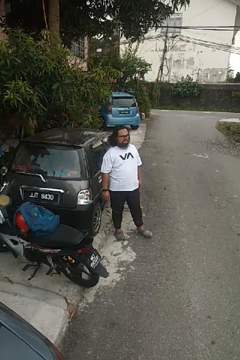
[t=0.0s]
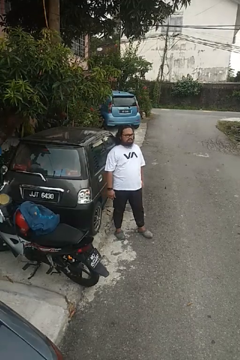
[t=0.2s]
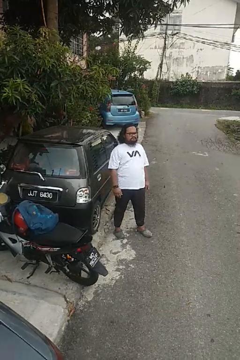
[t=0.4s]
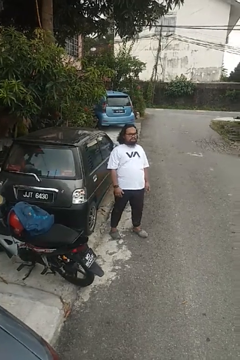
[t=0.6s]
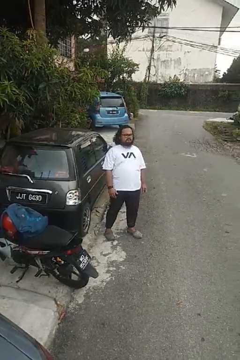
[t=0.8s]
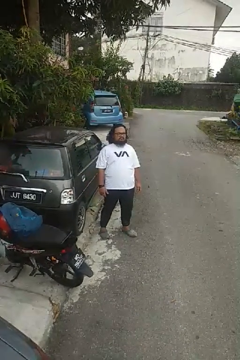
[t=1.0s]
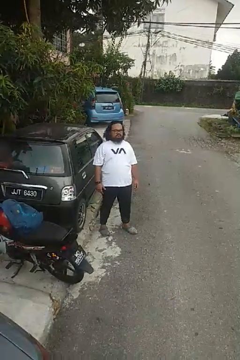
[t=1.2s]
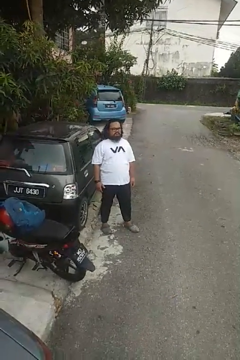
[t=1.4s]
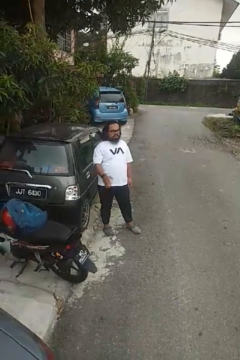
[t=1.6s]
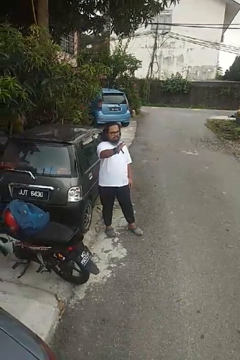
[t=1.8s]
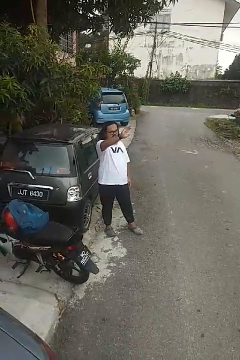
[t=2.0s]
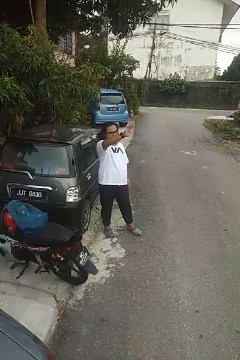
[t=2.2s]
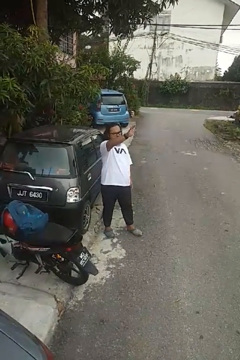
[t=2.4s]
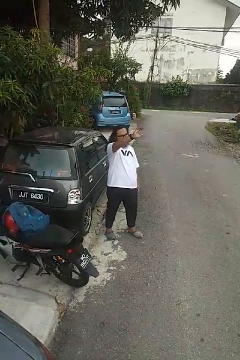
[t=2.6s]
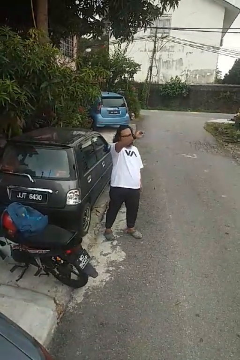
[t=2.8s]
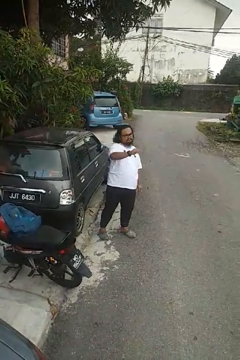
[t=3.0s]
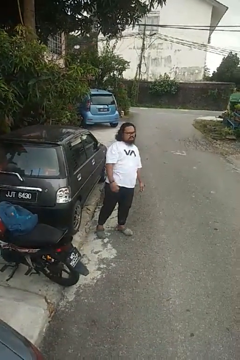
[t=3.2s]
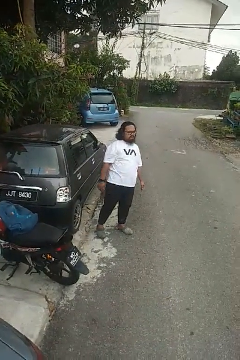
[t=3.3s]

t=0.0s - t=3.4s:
person waves at person

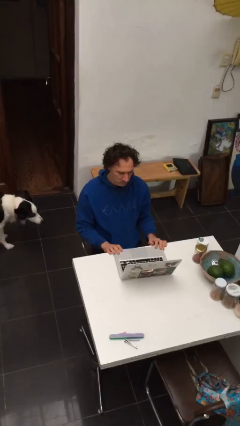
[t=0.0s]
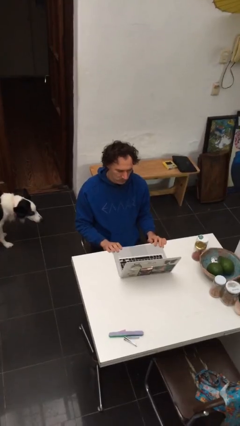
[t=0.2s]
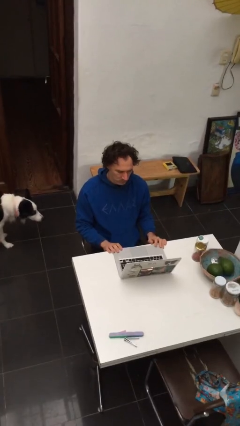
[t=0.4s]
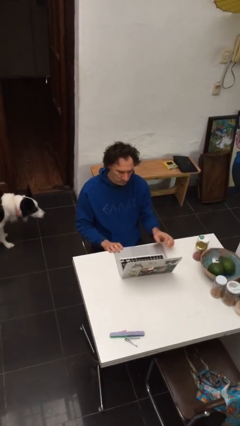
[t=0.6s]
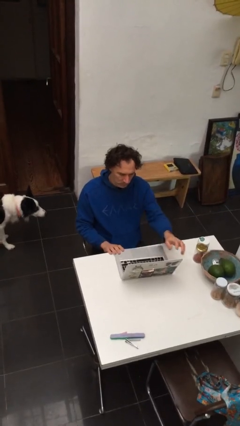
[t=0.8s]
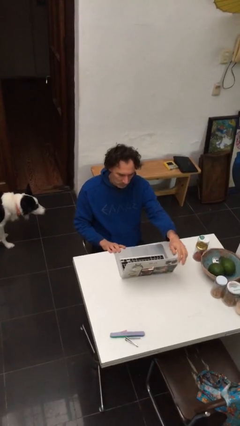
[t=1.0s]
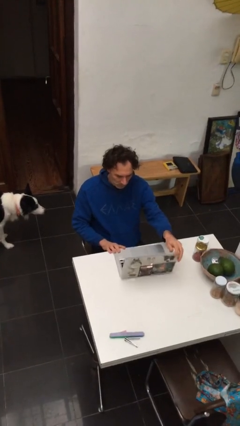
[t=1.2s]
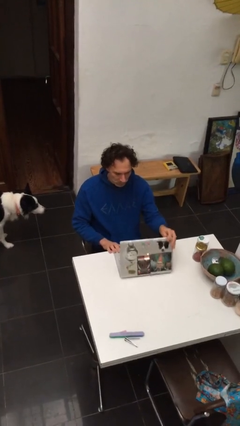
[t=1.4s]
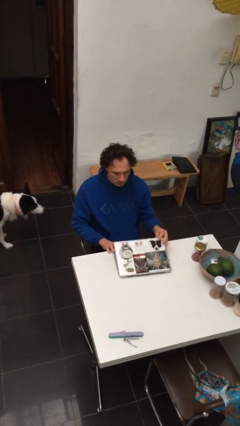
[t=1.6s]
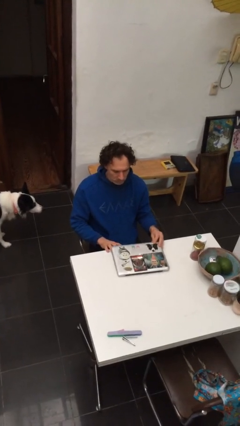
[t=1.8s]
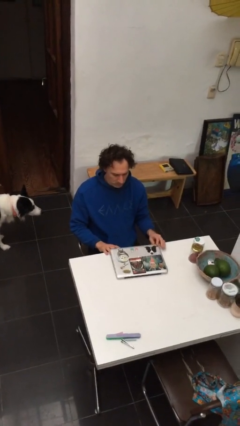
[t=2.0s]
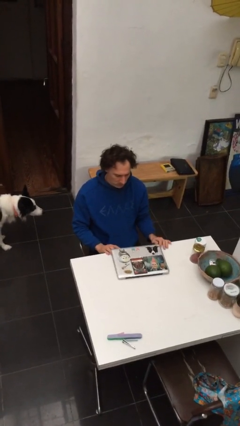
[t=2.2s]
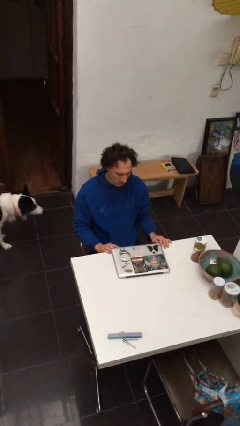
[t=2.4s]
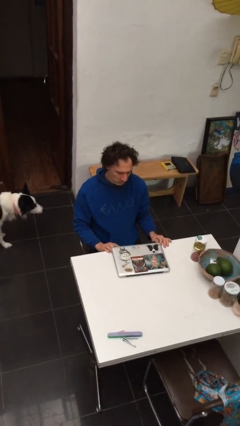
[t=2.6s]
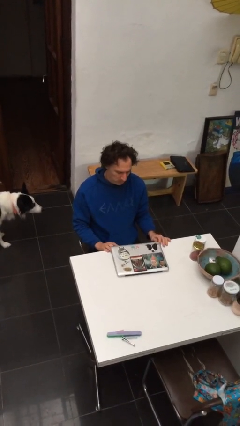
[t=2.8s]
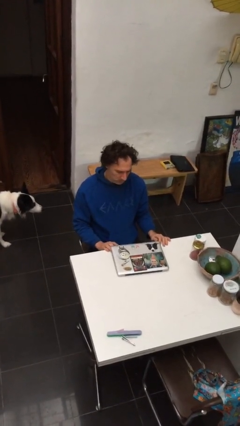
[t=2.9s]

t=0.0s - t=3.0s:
person closes laptop

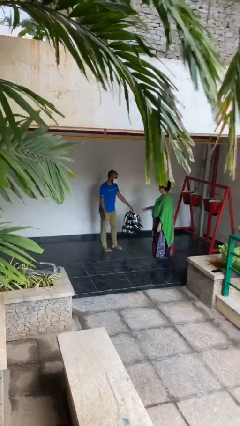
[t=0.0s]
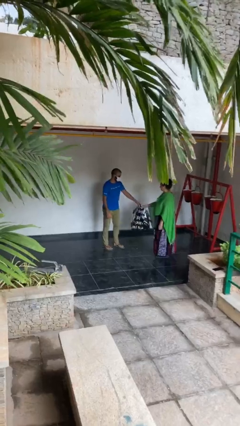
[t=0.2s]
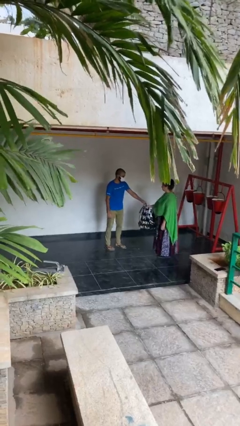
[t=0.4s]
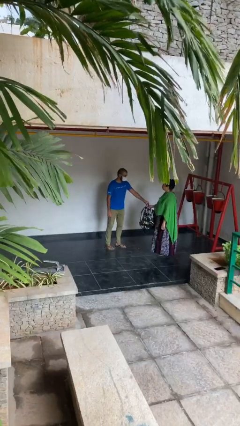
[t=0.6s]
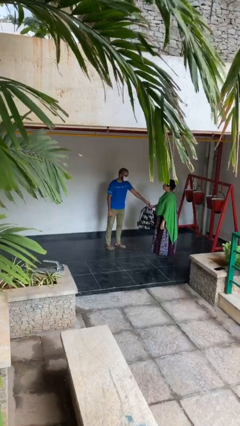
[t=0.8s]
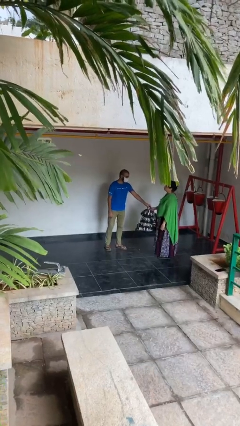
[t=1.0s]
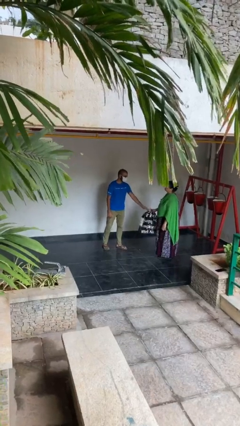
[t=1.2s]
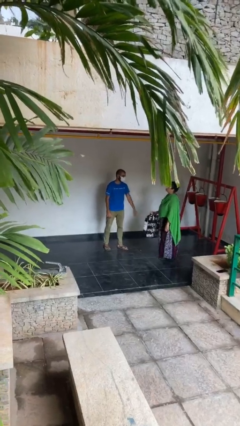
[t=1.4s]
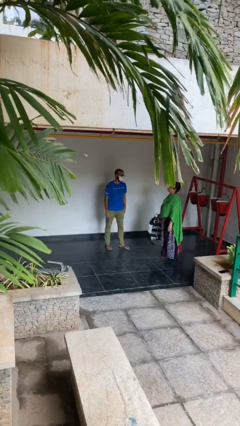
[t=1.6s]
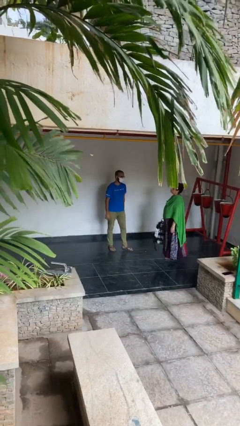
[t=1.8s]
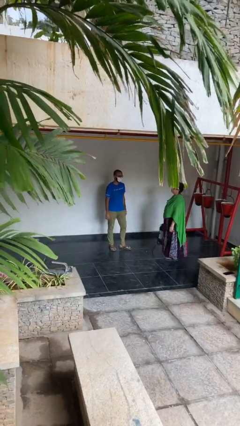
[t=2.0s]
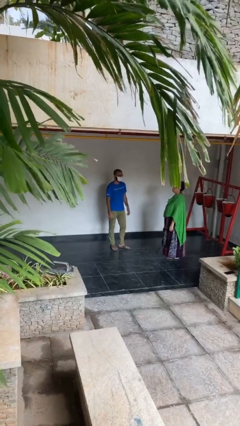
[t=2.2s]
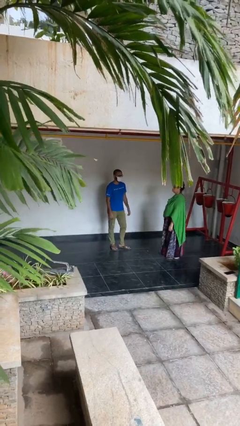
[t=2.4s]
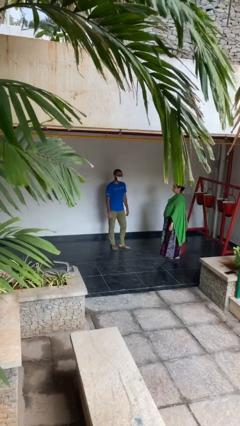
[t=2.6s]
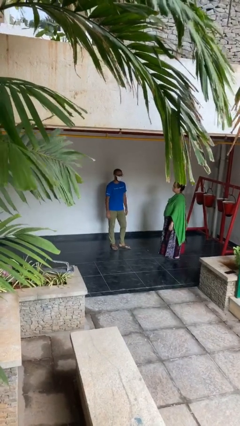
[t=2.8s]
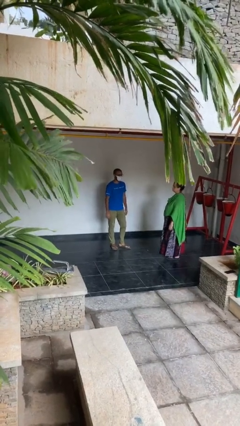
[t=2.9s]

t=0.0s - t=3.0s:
person transfers object to person

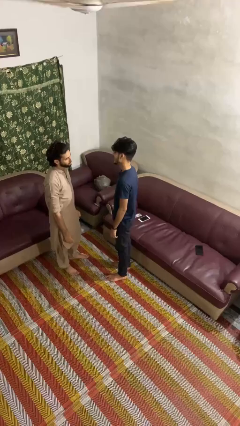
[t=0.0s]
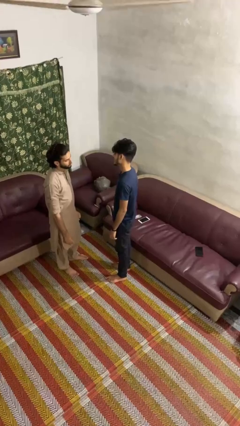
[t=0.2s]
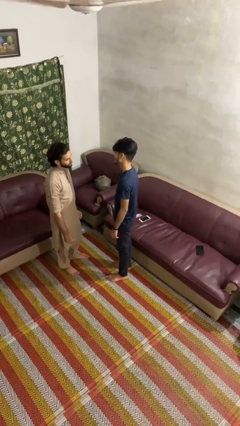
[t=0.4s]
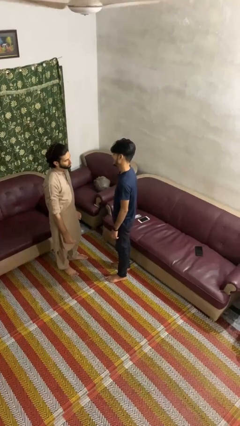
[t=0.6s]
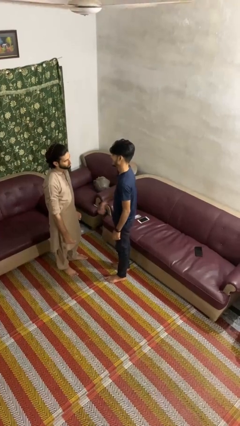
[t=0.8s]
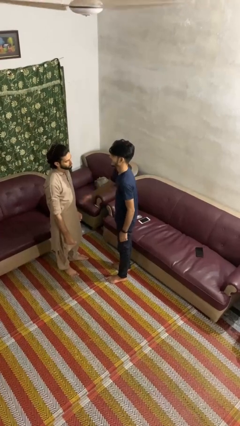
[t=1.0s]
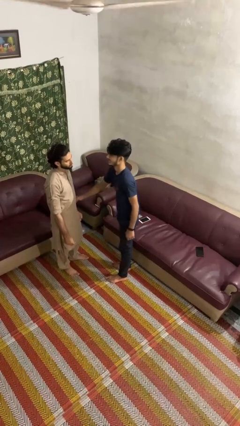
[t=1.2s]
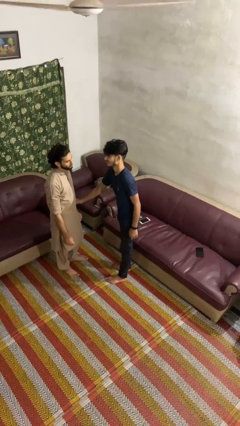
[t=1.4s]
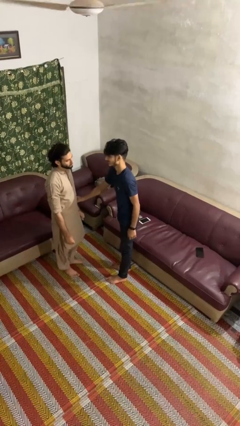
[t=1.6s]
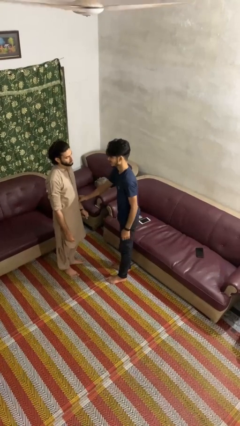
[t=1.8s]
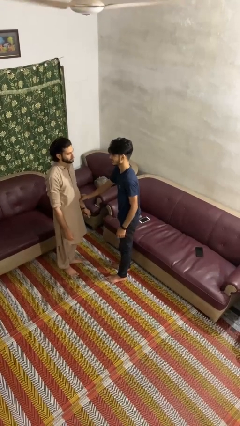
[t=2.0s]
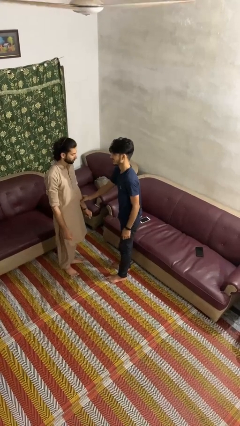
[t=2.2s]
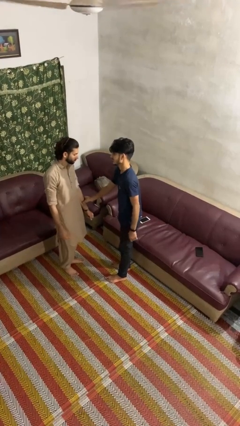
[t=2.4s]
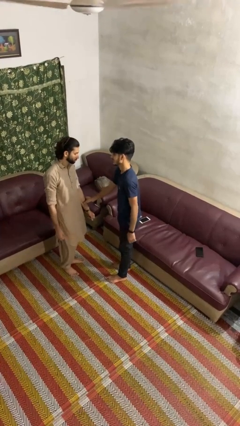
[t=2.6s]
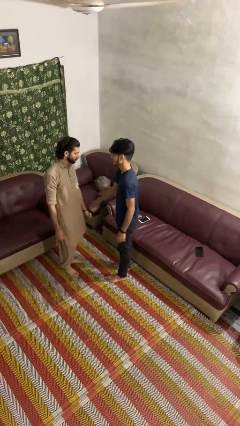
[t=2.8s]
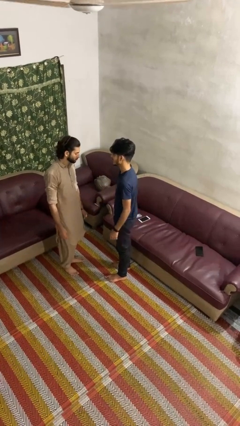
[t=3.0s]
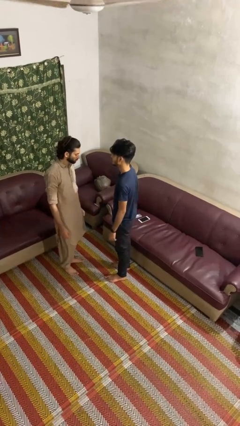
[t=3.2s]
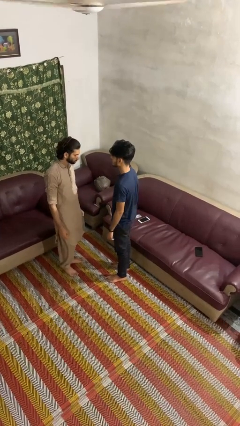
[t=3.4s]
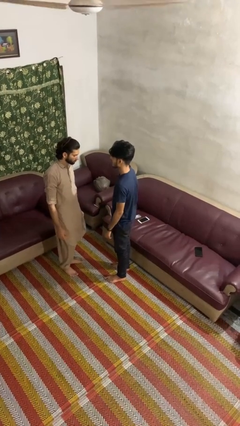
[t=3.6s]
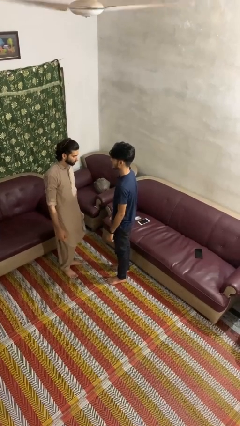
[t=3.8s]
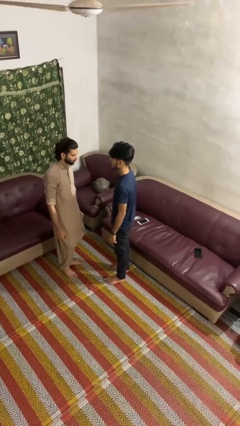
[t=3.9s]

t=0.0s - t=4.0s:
person grabs person by forearm

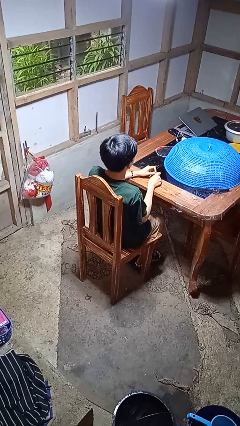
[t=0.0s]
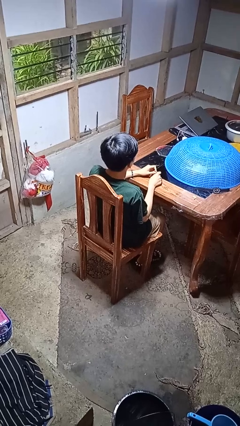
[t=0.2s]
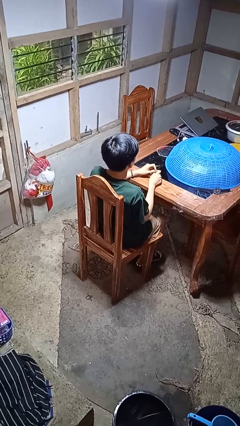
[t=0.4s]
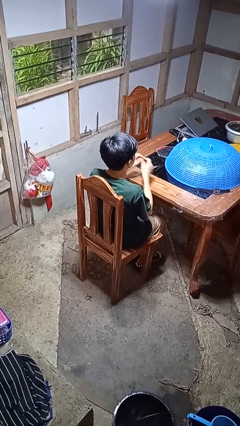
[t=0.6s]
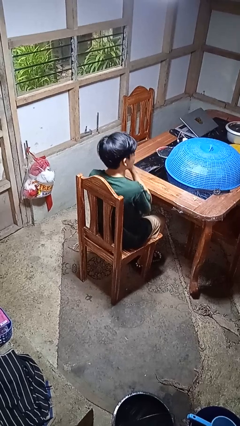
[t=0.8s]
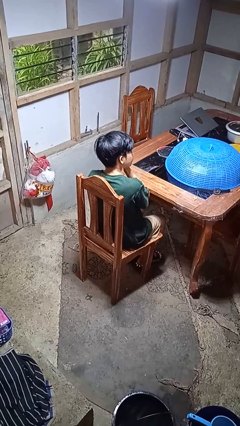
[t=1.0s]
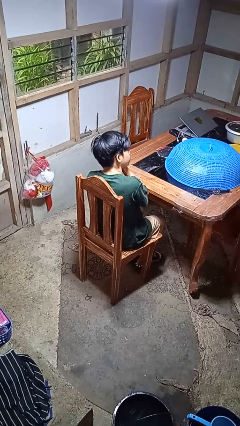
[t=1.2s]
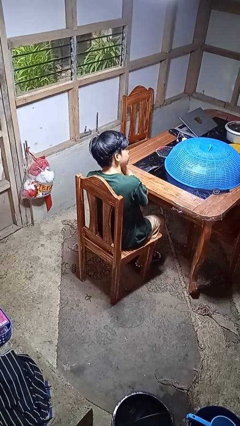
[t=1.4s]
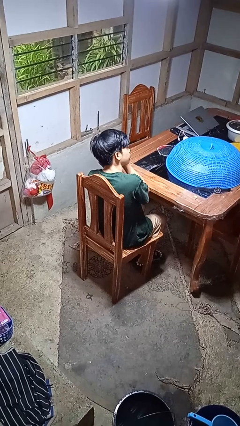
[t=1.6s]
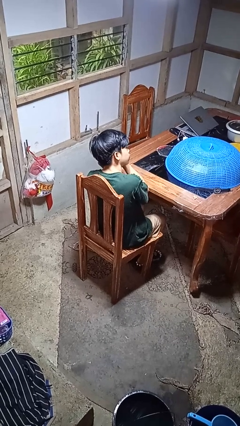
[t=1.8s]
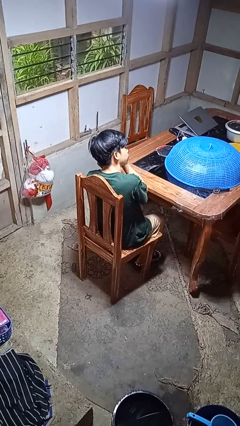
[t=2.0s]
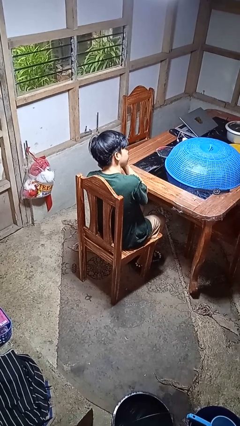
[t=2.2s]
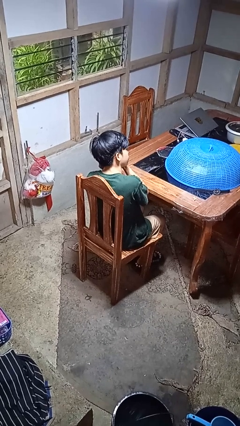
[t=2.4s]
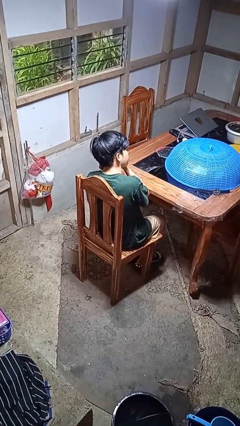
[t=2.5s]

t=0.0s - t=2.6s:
person takes off earrings

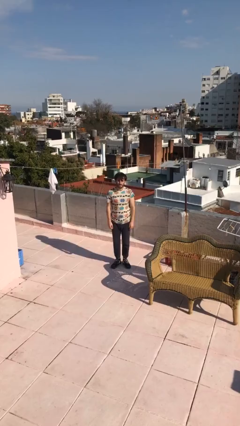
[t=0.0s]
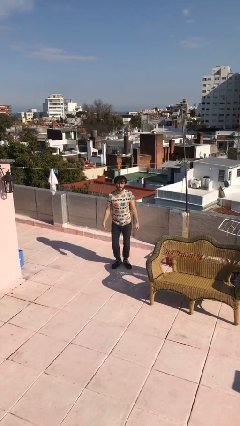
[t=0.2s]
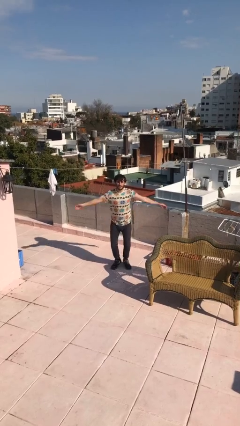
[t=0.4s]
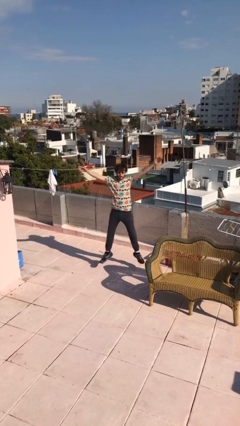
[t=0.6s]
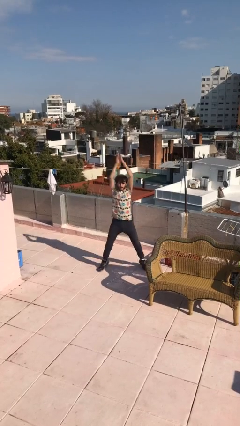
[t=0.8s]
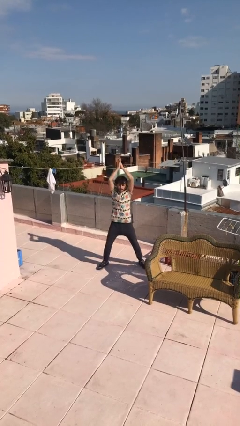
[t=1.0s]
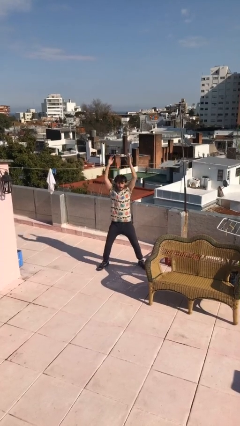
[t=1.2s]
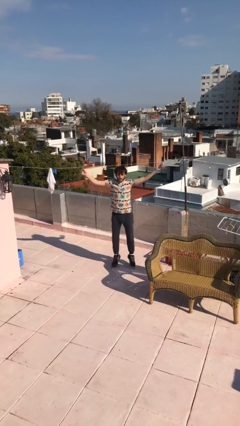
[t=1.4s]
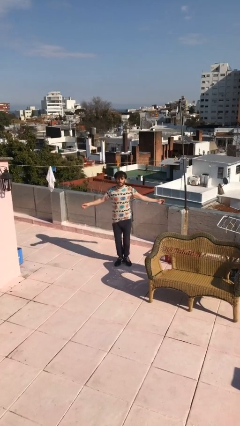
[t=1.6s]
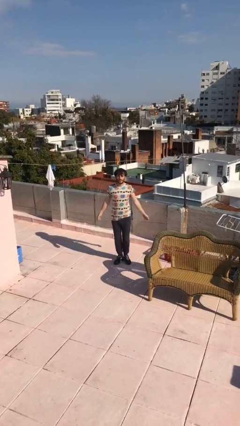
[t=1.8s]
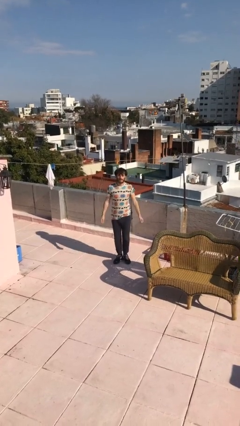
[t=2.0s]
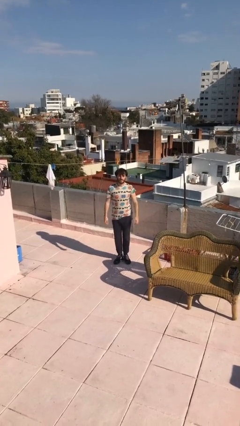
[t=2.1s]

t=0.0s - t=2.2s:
person exercises with jumping jacks
